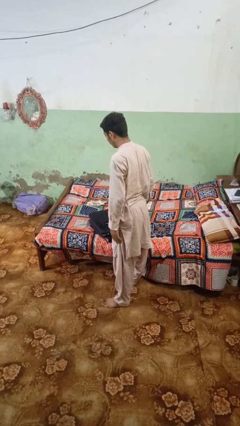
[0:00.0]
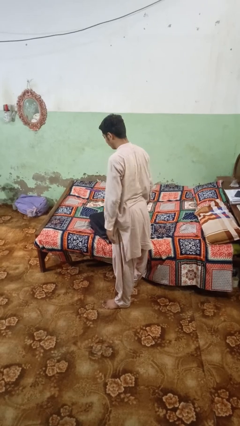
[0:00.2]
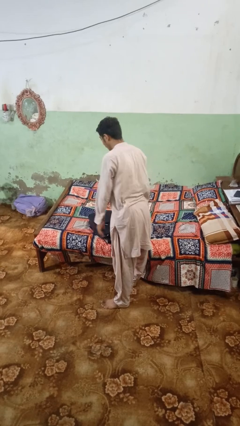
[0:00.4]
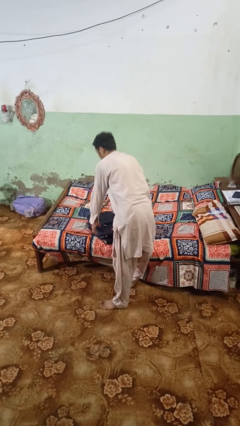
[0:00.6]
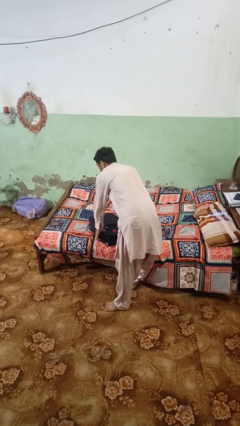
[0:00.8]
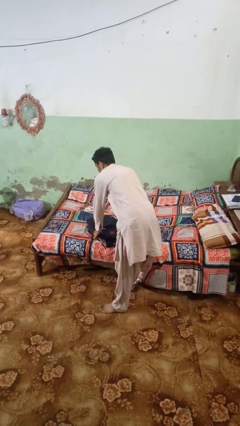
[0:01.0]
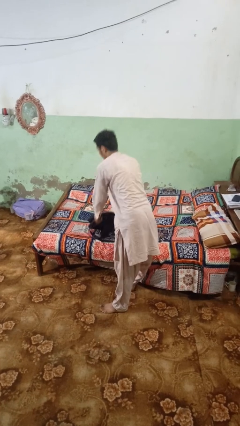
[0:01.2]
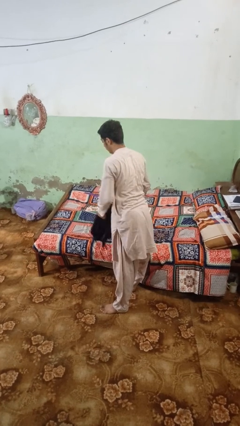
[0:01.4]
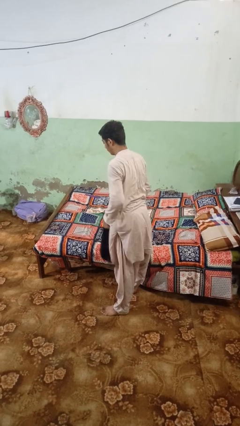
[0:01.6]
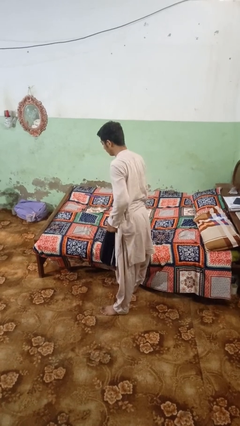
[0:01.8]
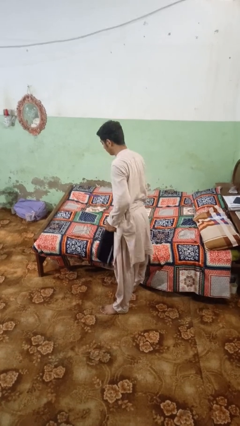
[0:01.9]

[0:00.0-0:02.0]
person picks up object from bed

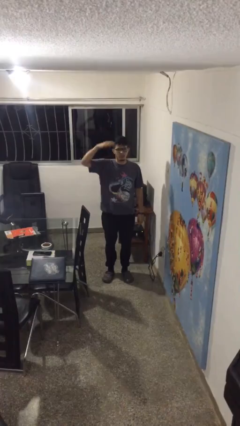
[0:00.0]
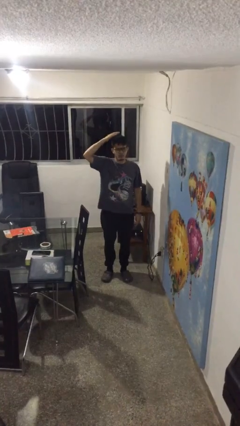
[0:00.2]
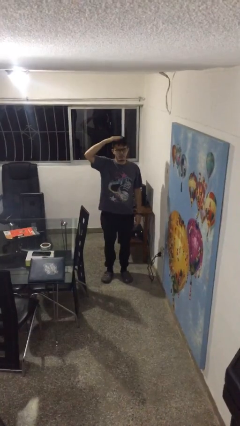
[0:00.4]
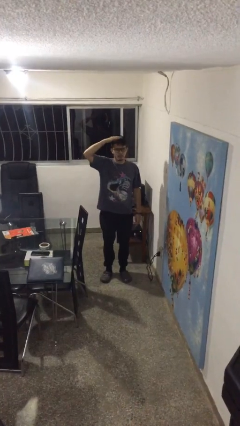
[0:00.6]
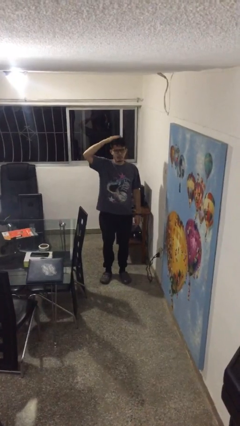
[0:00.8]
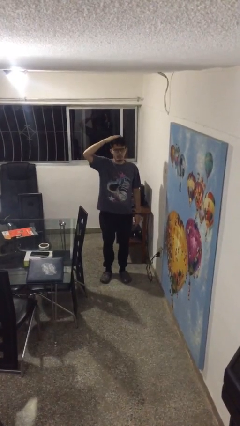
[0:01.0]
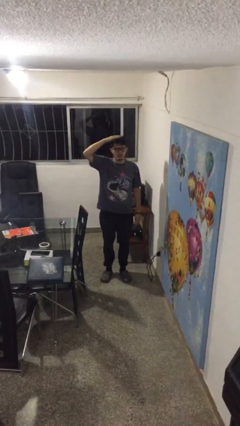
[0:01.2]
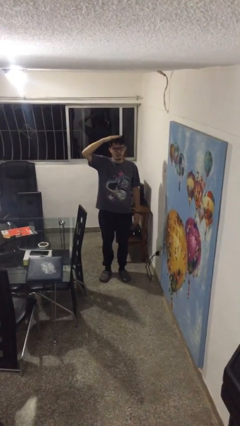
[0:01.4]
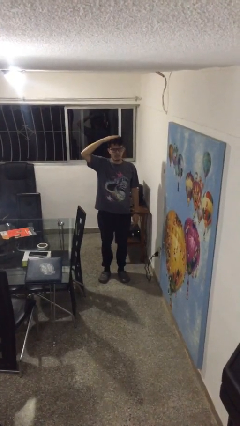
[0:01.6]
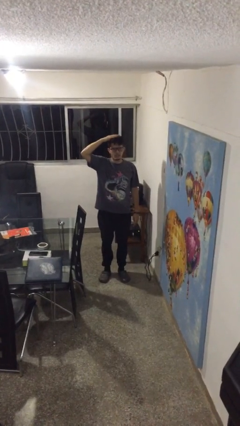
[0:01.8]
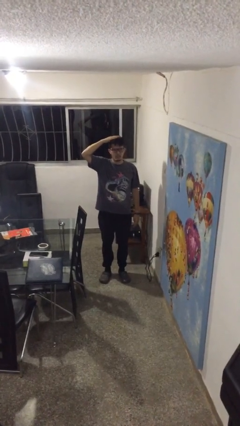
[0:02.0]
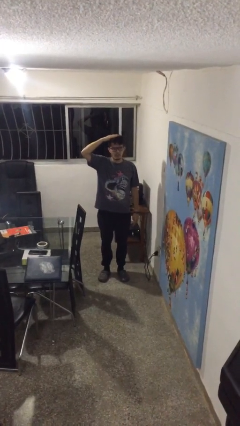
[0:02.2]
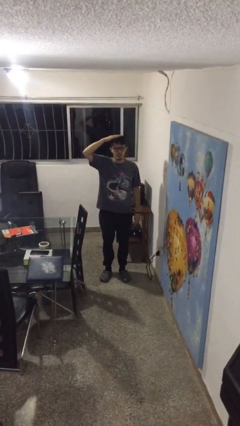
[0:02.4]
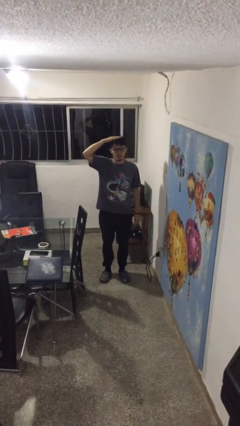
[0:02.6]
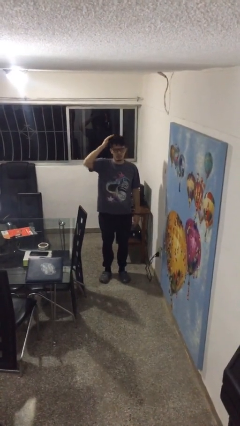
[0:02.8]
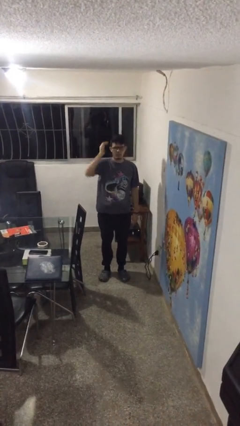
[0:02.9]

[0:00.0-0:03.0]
person pats head

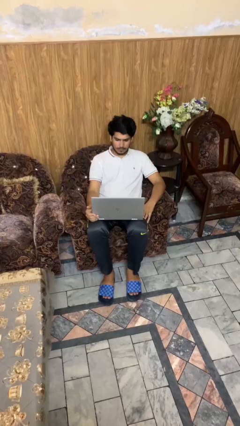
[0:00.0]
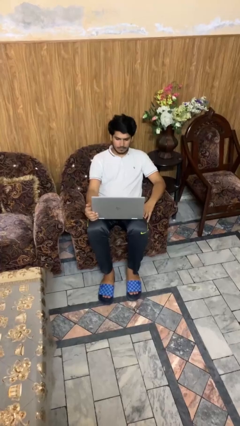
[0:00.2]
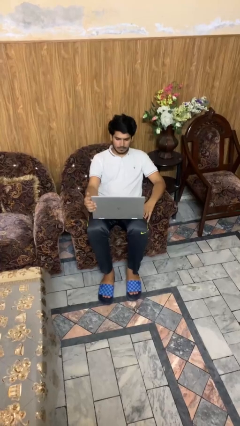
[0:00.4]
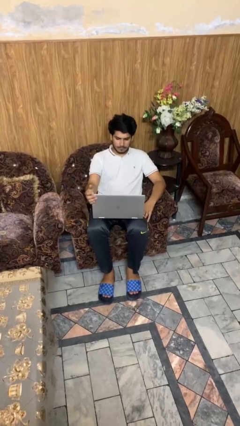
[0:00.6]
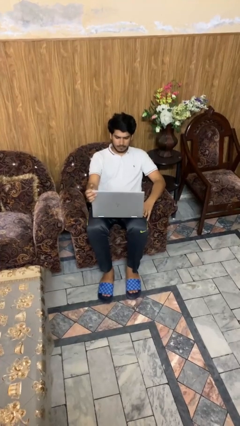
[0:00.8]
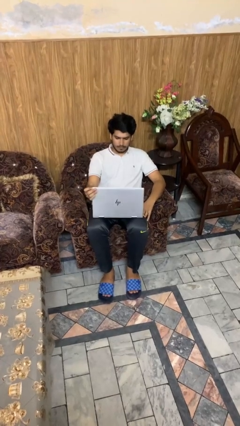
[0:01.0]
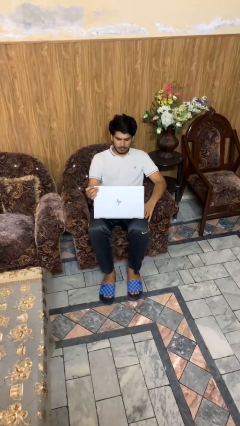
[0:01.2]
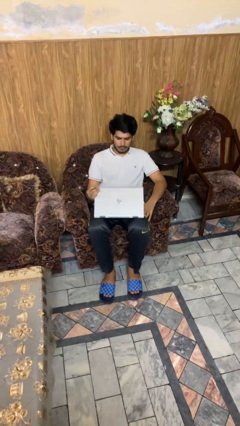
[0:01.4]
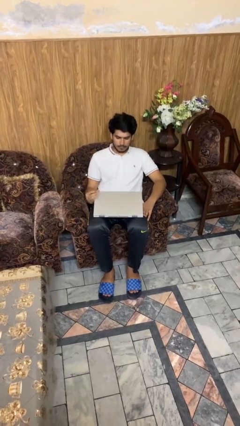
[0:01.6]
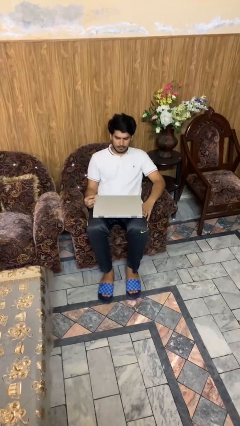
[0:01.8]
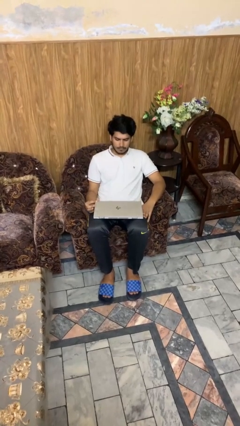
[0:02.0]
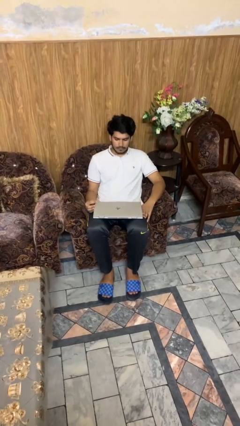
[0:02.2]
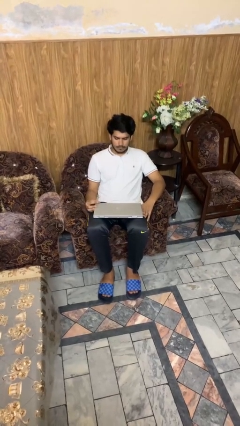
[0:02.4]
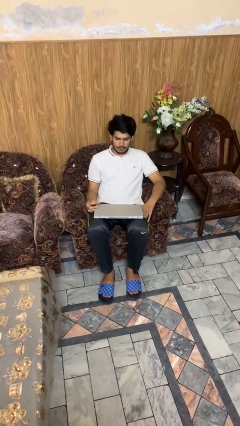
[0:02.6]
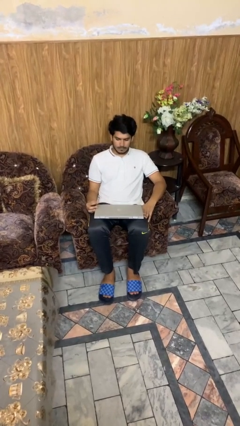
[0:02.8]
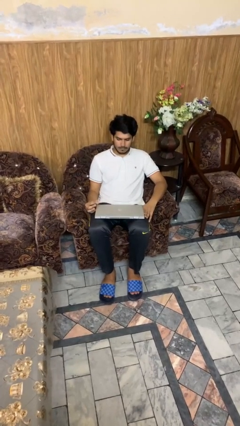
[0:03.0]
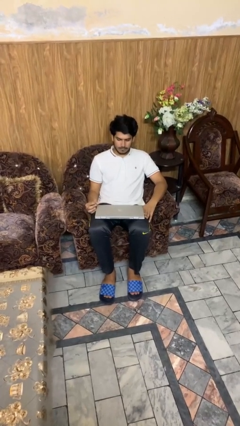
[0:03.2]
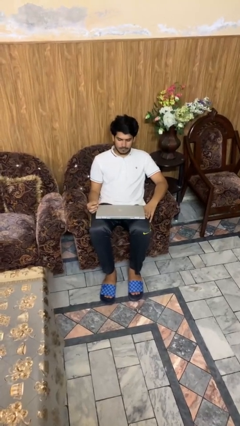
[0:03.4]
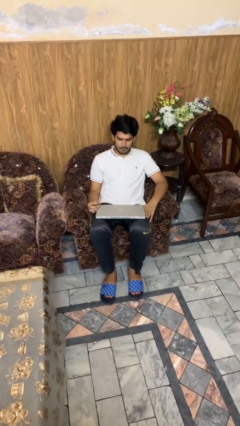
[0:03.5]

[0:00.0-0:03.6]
person closes laptop

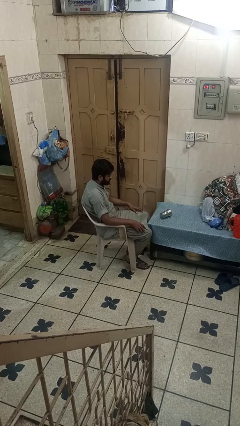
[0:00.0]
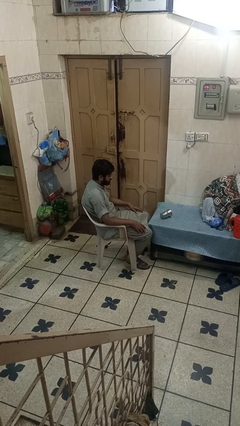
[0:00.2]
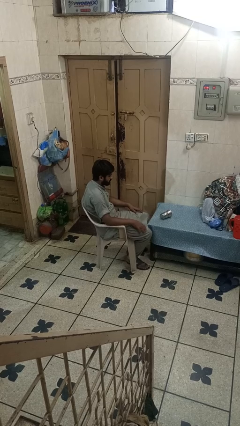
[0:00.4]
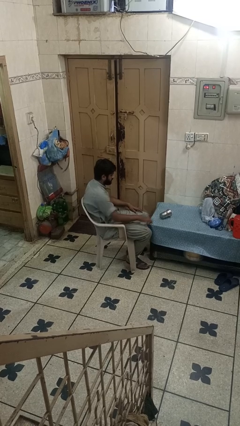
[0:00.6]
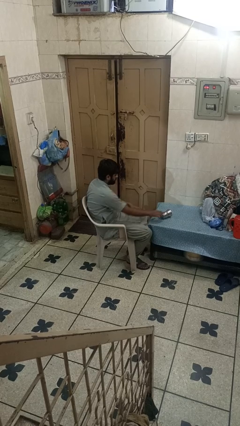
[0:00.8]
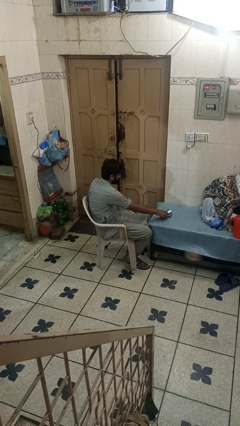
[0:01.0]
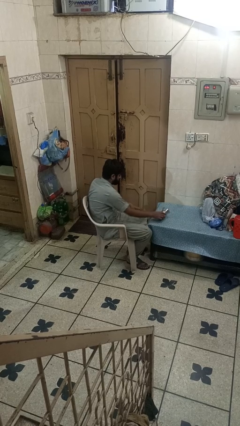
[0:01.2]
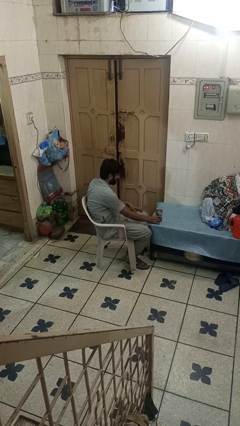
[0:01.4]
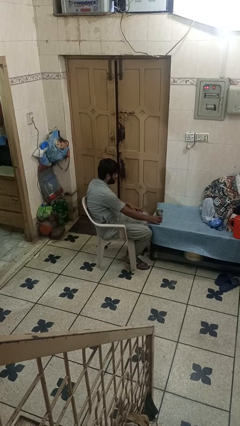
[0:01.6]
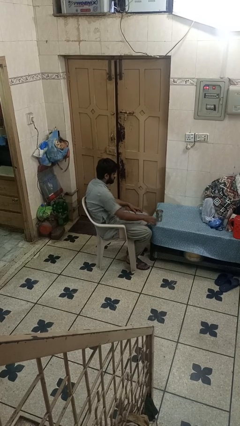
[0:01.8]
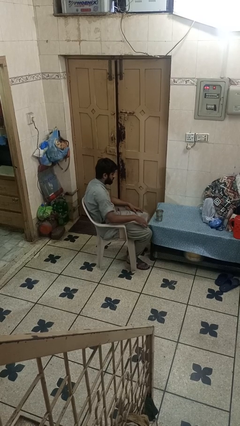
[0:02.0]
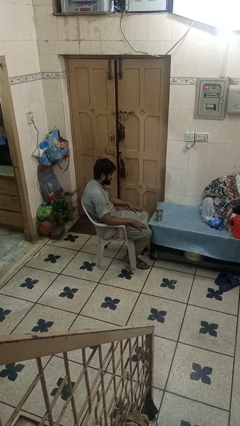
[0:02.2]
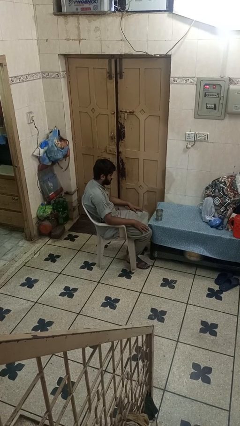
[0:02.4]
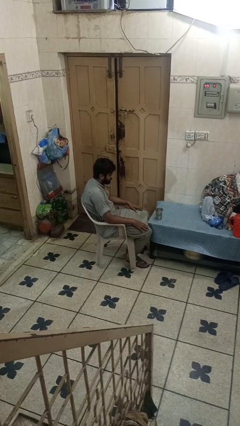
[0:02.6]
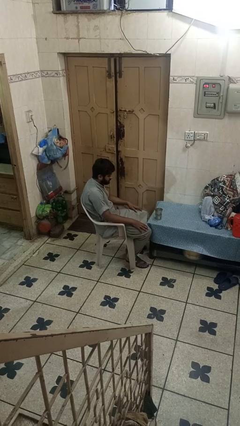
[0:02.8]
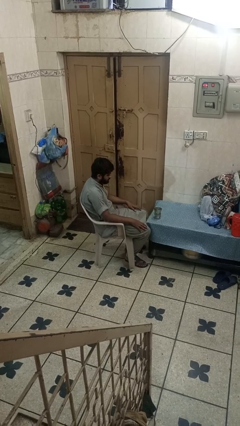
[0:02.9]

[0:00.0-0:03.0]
person sets upright glass

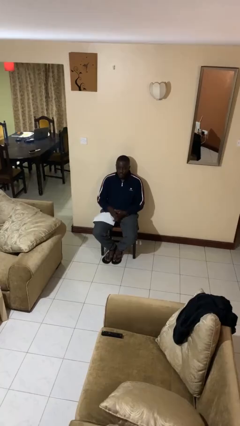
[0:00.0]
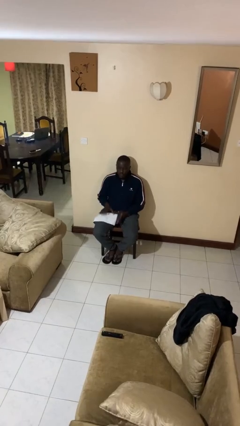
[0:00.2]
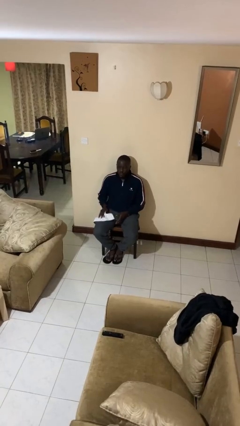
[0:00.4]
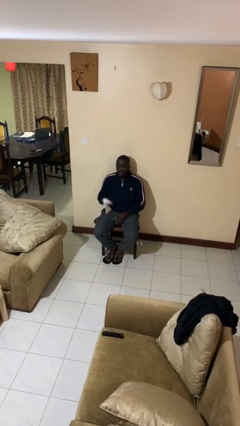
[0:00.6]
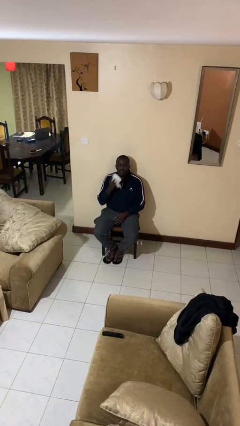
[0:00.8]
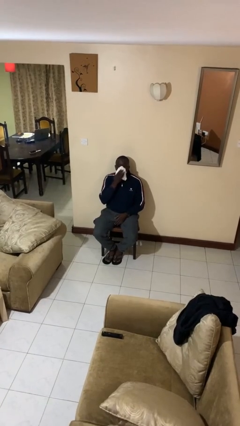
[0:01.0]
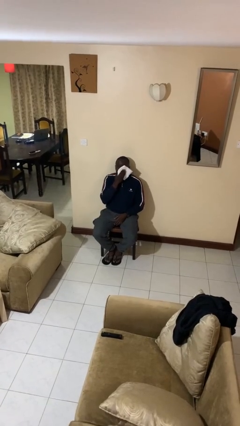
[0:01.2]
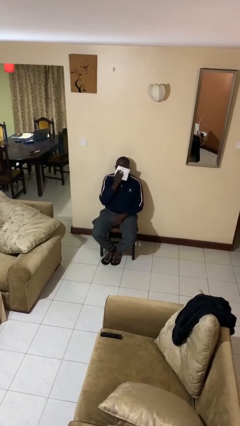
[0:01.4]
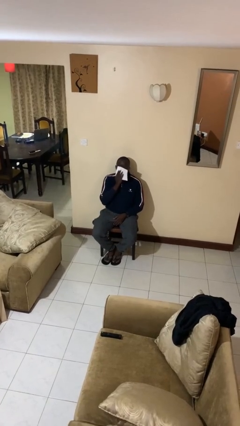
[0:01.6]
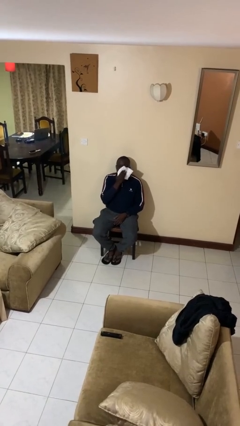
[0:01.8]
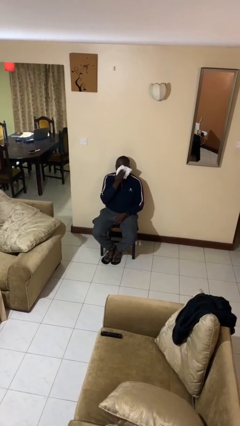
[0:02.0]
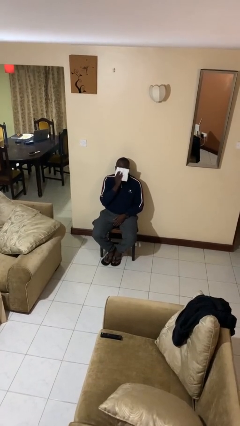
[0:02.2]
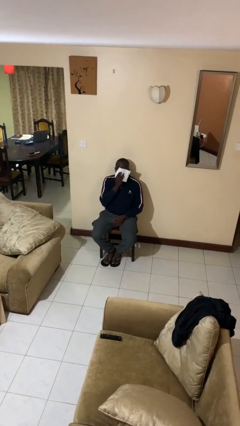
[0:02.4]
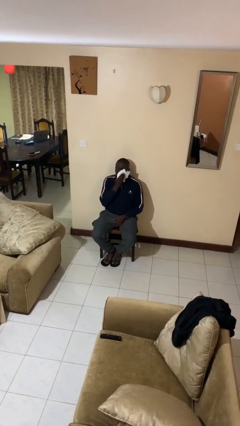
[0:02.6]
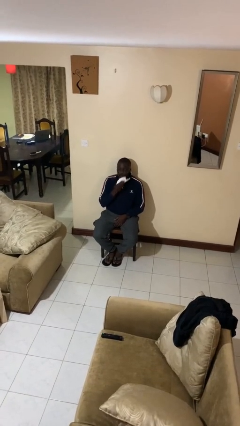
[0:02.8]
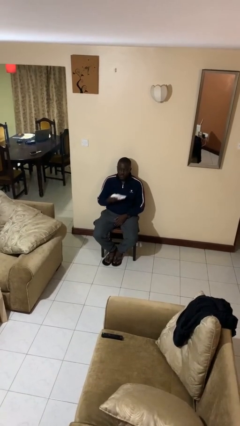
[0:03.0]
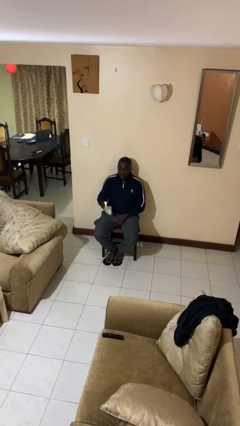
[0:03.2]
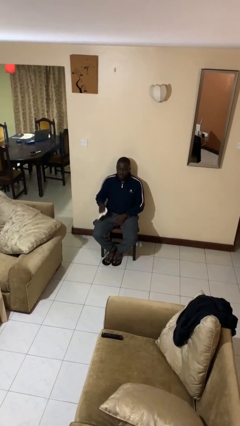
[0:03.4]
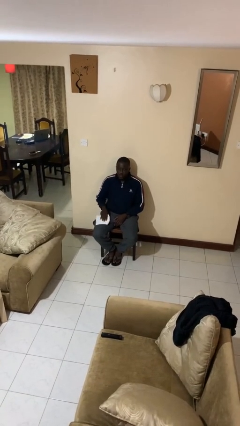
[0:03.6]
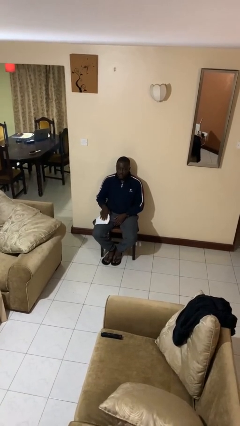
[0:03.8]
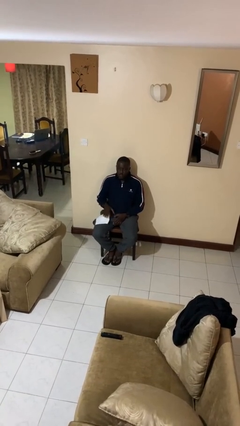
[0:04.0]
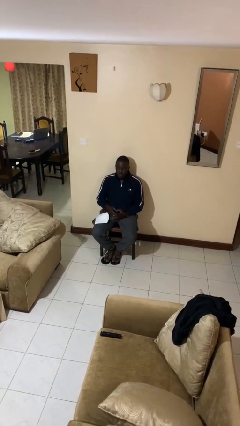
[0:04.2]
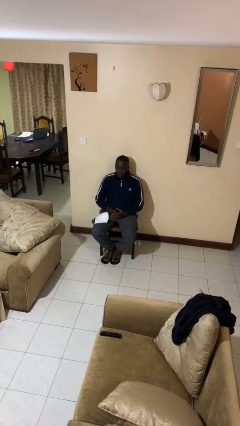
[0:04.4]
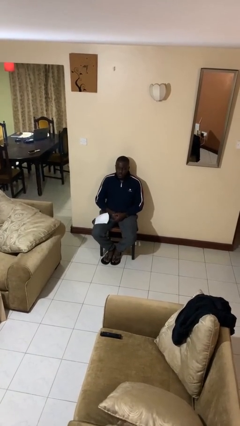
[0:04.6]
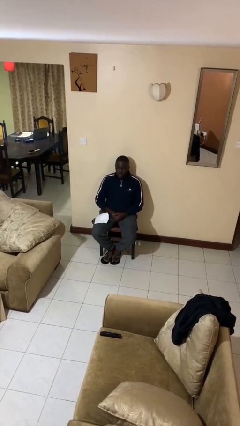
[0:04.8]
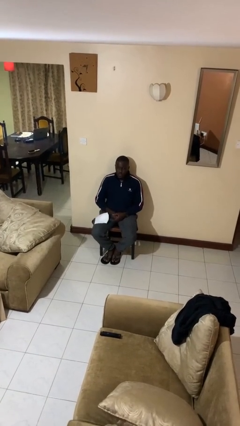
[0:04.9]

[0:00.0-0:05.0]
person wipes mouth with napkin

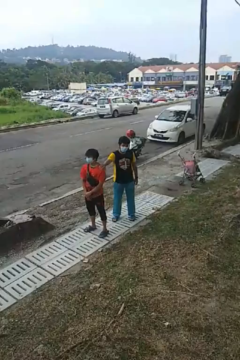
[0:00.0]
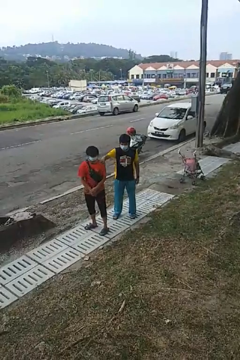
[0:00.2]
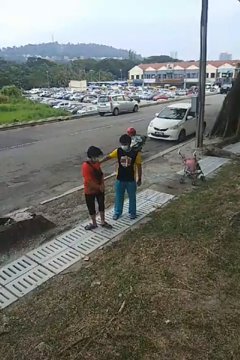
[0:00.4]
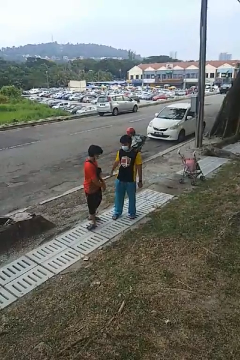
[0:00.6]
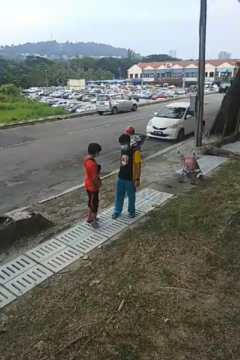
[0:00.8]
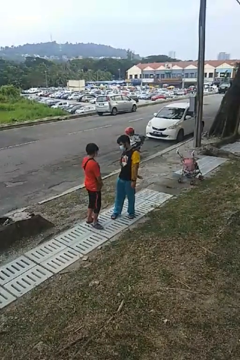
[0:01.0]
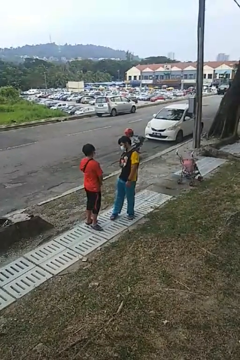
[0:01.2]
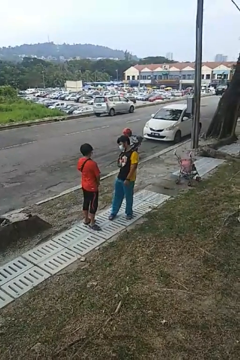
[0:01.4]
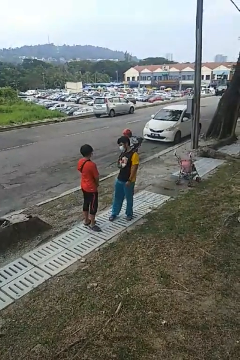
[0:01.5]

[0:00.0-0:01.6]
person spins person around
